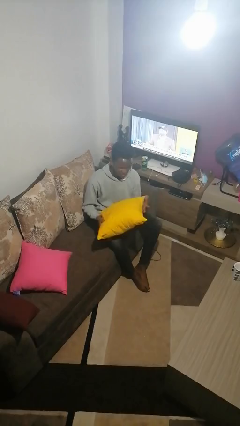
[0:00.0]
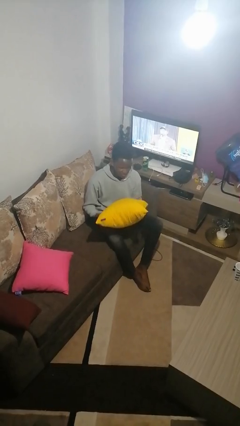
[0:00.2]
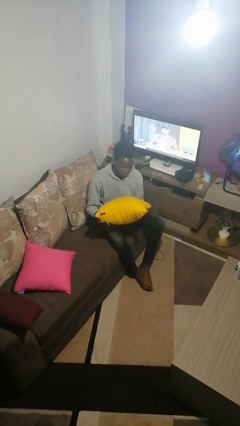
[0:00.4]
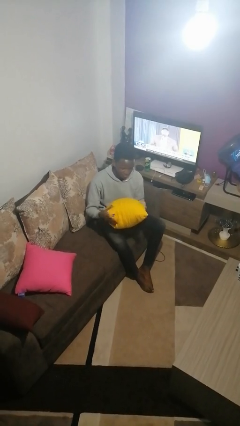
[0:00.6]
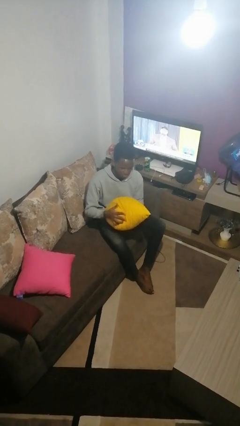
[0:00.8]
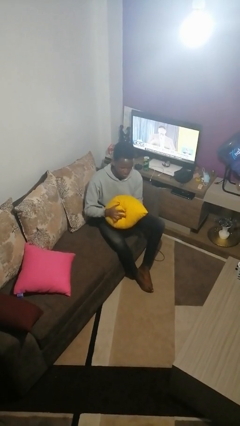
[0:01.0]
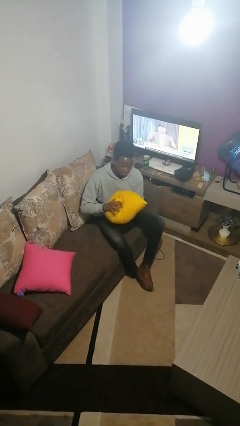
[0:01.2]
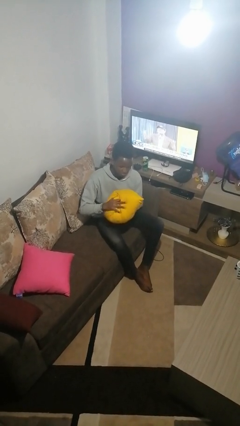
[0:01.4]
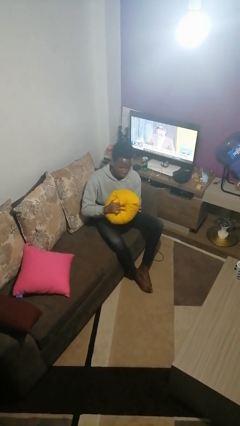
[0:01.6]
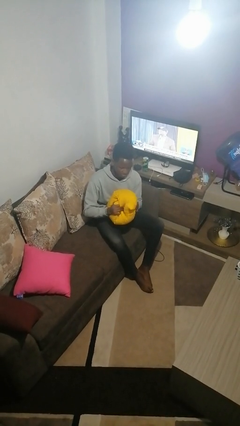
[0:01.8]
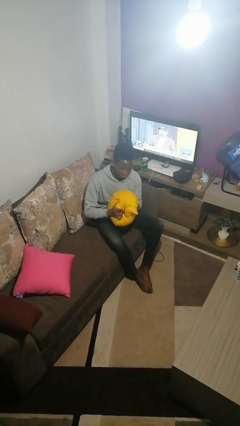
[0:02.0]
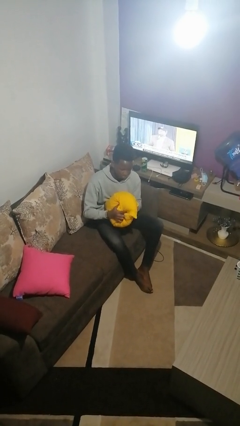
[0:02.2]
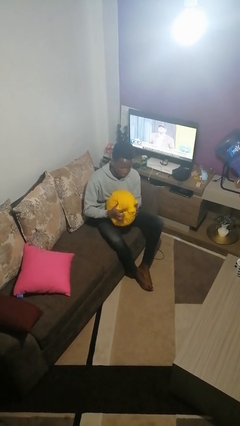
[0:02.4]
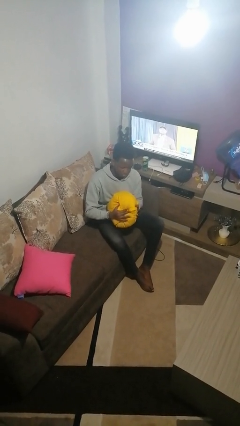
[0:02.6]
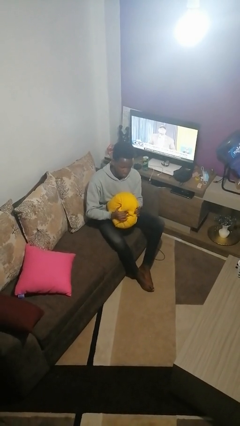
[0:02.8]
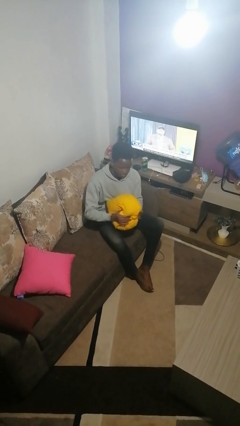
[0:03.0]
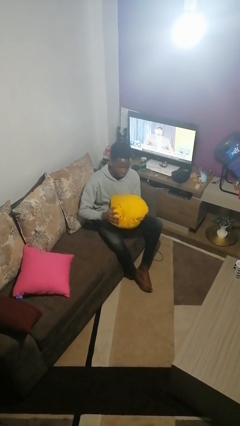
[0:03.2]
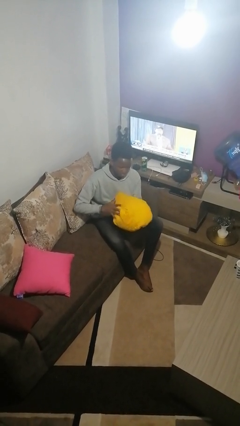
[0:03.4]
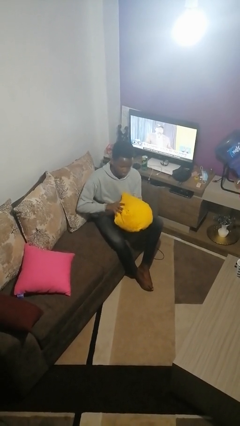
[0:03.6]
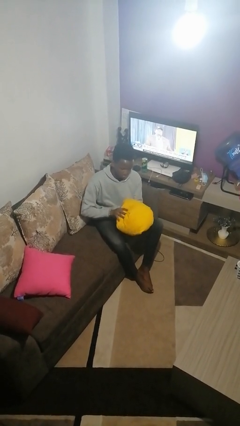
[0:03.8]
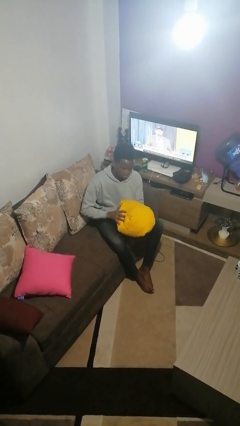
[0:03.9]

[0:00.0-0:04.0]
person squeezes object

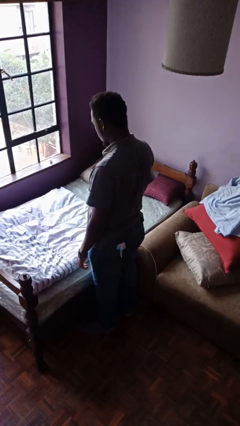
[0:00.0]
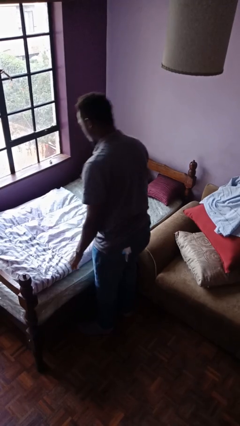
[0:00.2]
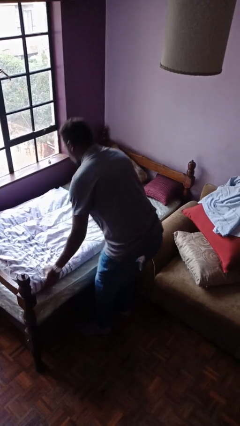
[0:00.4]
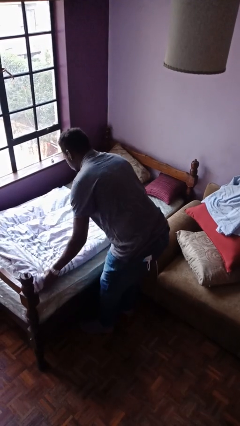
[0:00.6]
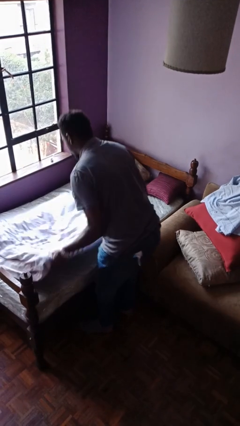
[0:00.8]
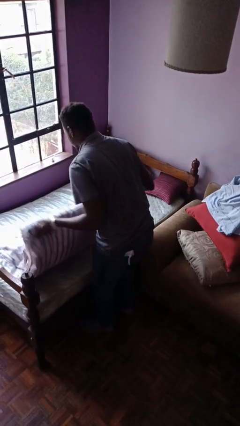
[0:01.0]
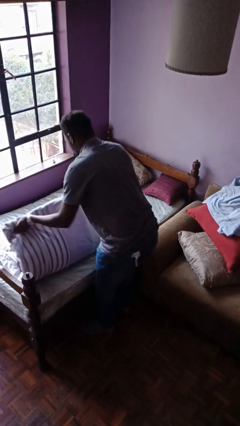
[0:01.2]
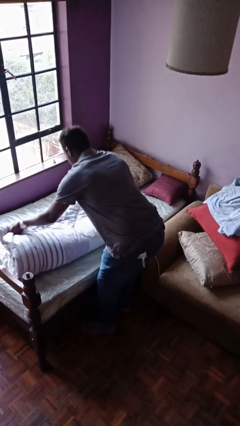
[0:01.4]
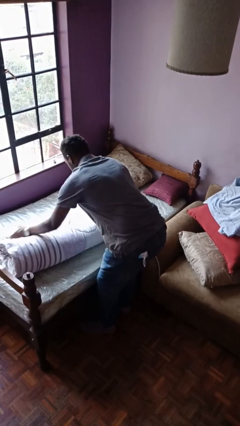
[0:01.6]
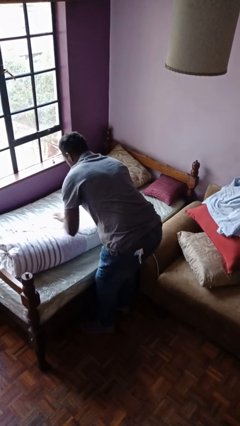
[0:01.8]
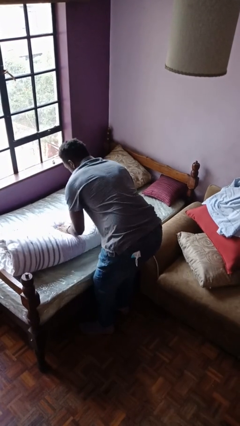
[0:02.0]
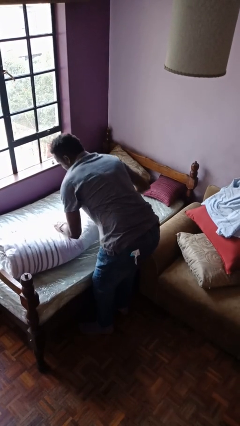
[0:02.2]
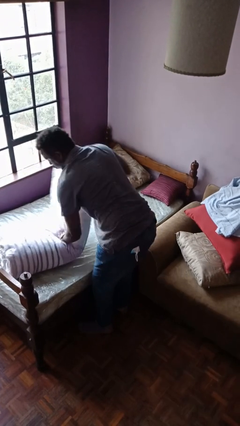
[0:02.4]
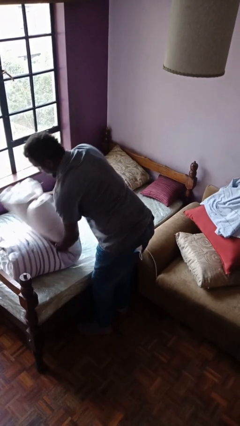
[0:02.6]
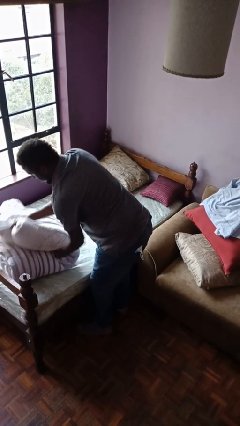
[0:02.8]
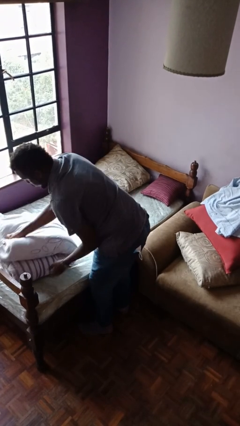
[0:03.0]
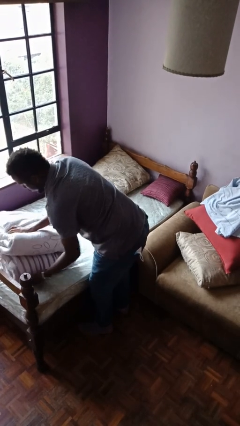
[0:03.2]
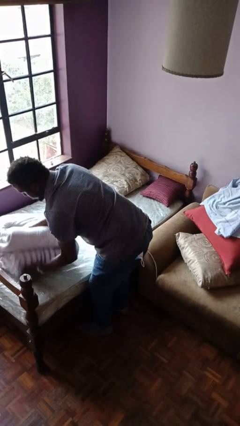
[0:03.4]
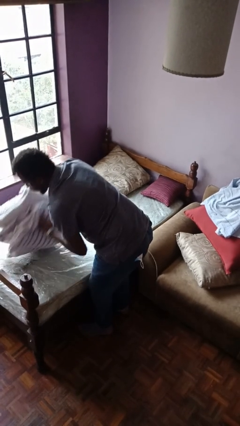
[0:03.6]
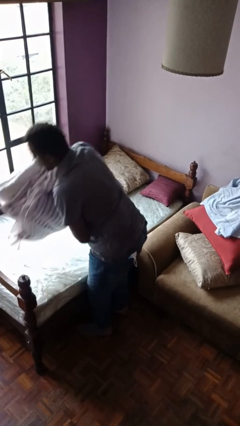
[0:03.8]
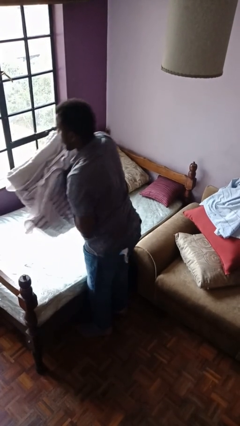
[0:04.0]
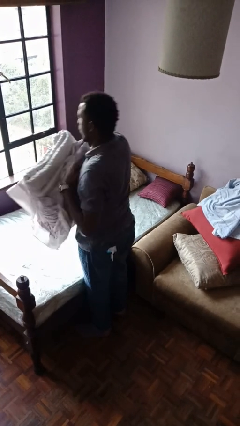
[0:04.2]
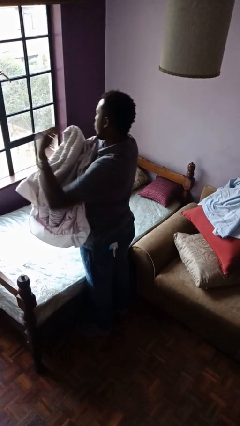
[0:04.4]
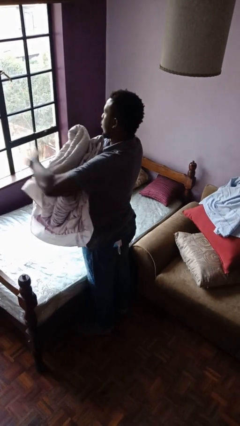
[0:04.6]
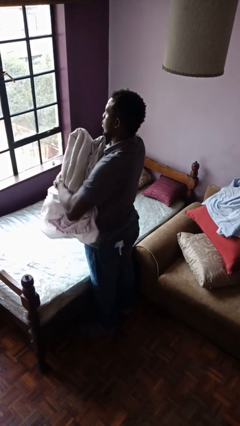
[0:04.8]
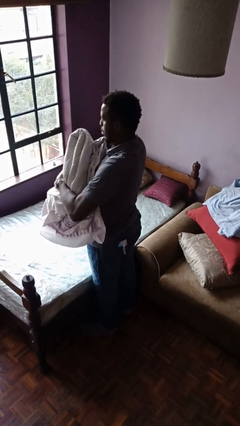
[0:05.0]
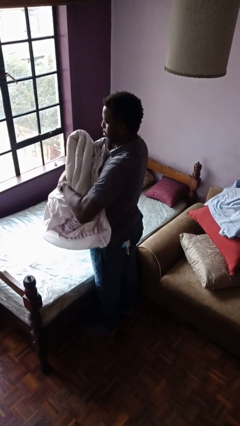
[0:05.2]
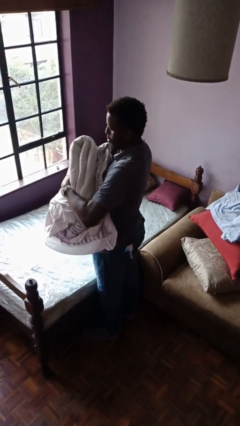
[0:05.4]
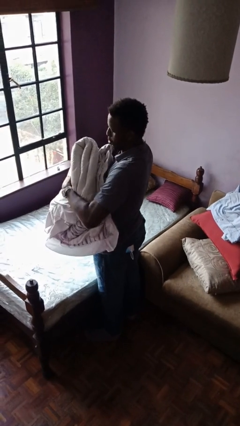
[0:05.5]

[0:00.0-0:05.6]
person folds blanket

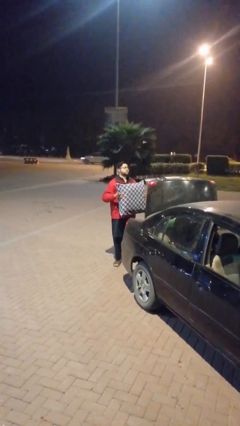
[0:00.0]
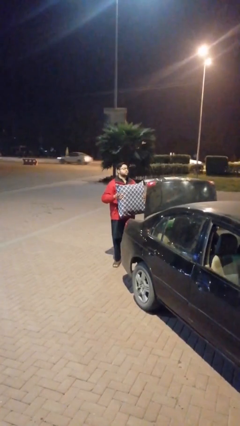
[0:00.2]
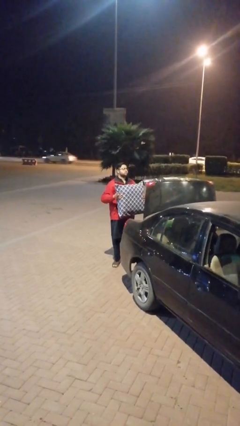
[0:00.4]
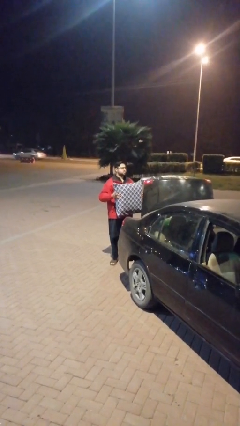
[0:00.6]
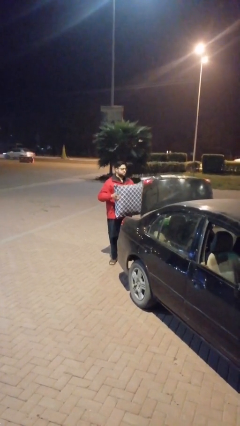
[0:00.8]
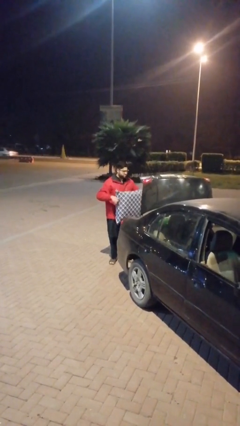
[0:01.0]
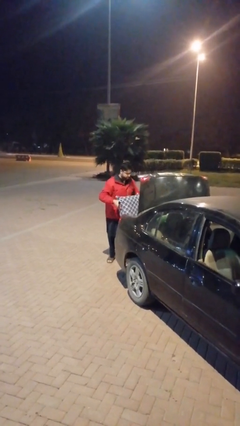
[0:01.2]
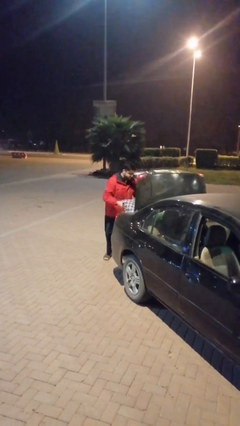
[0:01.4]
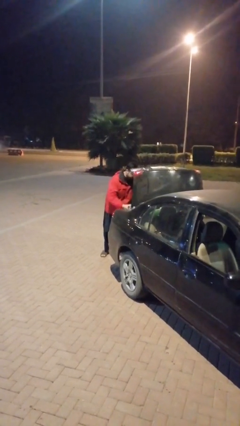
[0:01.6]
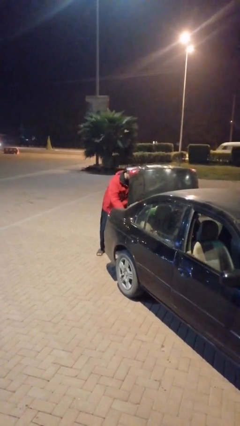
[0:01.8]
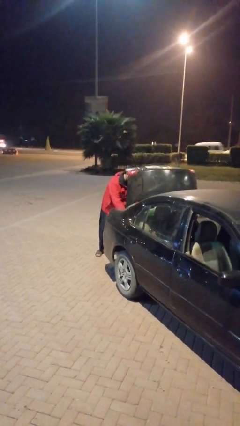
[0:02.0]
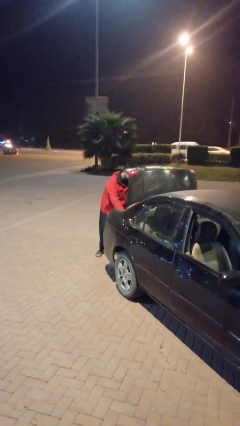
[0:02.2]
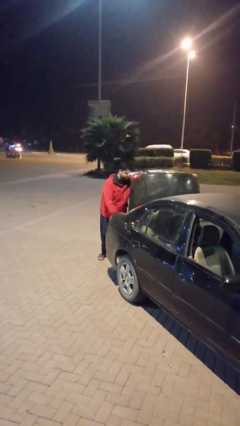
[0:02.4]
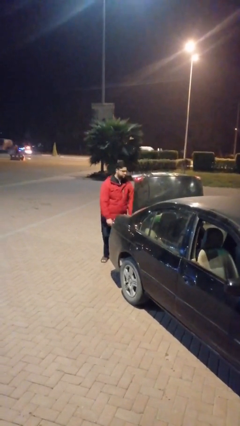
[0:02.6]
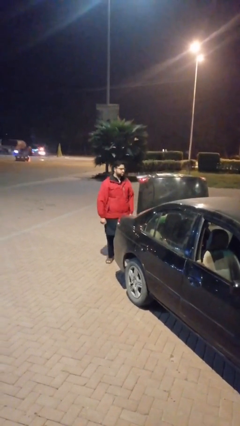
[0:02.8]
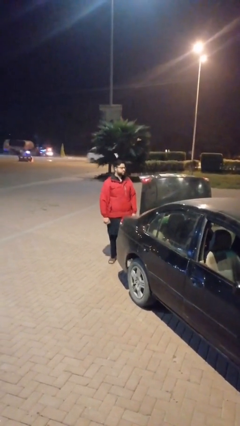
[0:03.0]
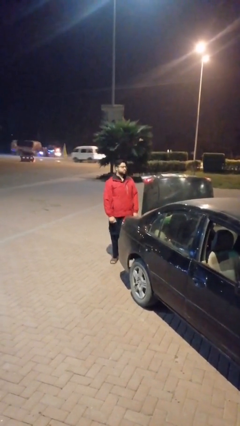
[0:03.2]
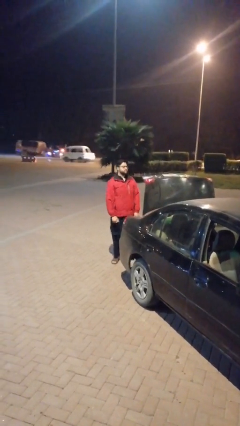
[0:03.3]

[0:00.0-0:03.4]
person loads car

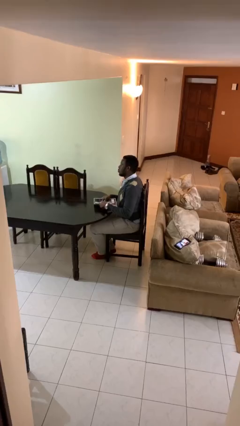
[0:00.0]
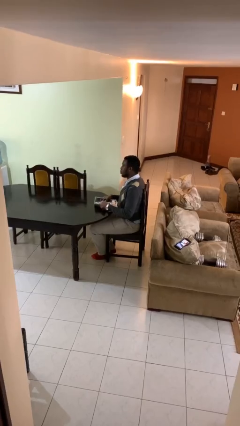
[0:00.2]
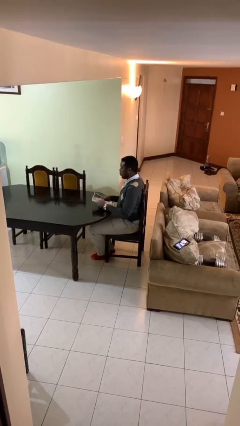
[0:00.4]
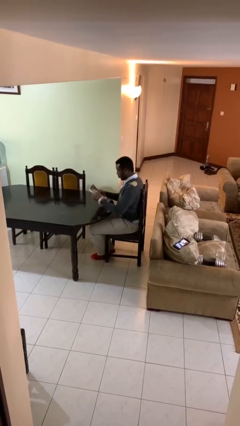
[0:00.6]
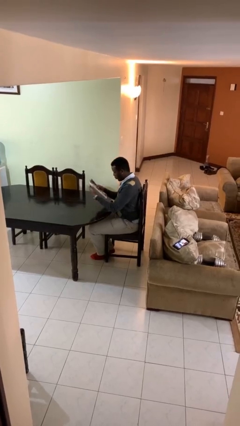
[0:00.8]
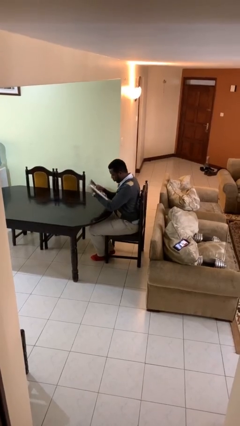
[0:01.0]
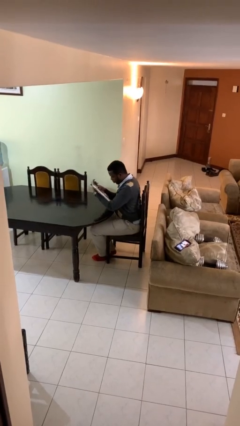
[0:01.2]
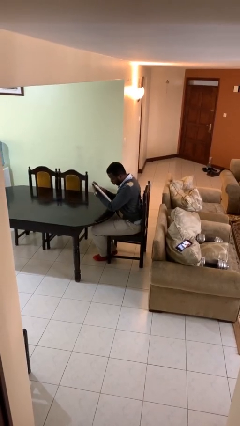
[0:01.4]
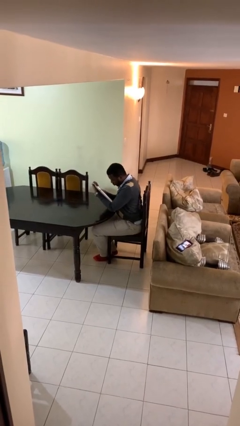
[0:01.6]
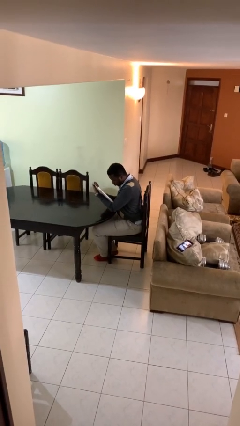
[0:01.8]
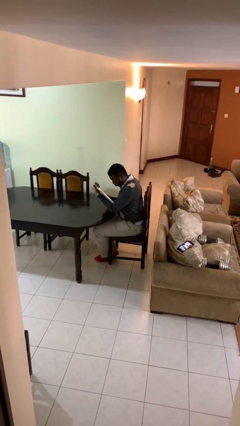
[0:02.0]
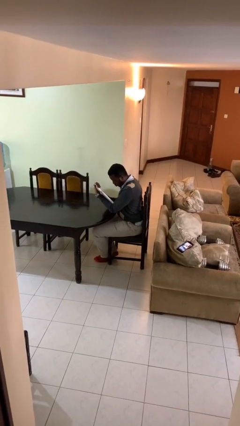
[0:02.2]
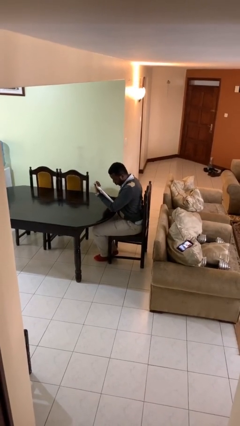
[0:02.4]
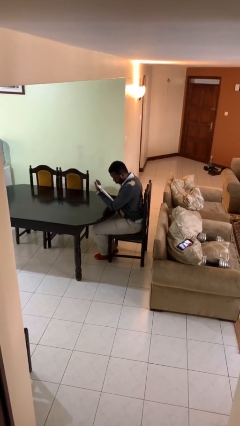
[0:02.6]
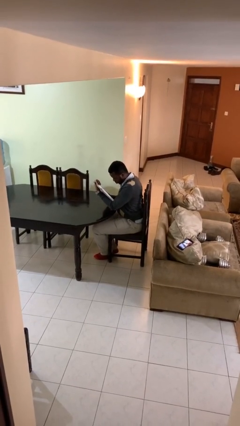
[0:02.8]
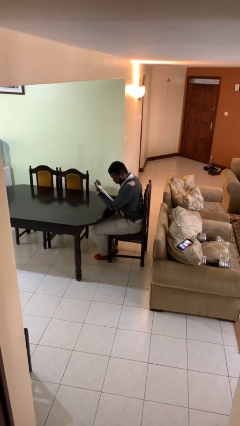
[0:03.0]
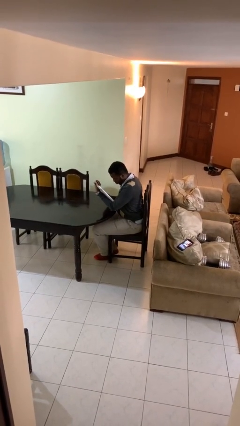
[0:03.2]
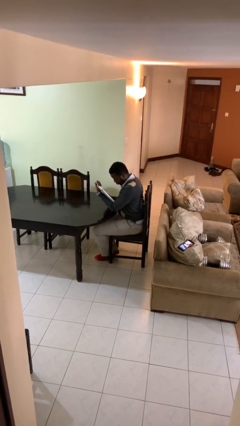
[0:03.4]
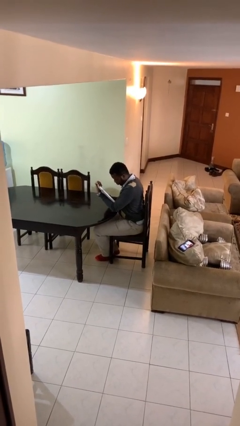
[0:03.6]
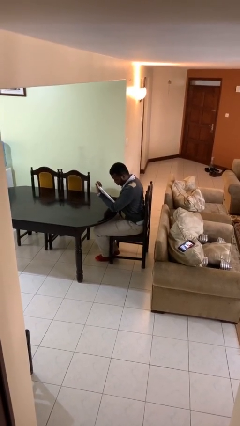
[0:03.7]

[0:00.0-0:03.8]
person reads document

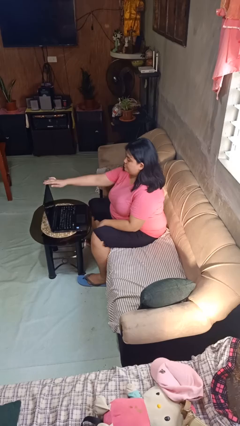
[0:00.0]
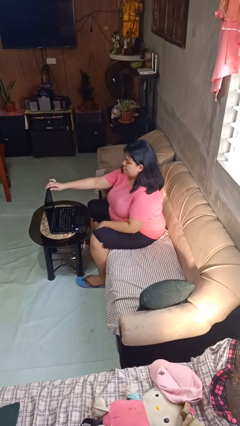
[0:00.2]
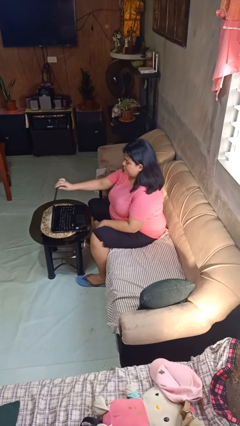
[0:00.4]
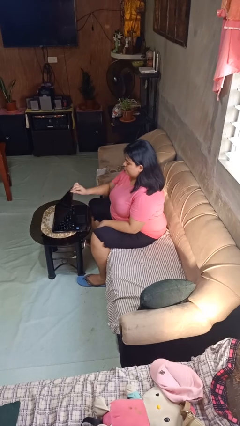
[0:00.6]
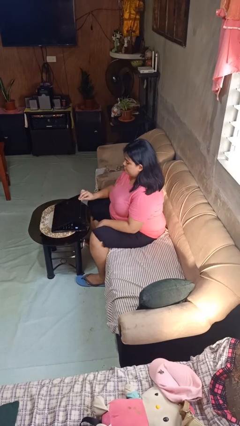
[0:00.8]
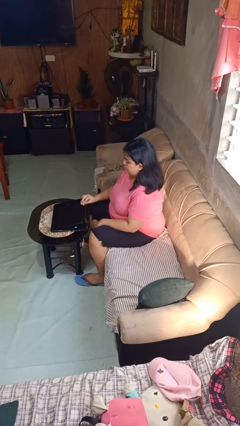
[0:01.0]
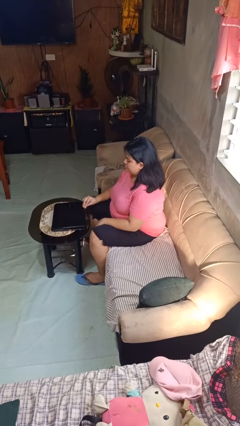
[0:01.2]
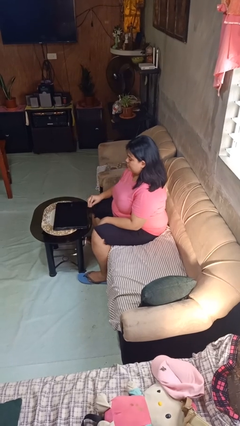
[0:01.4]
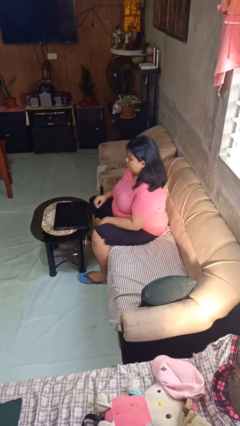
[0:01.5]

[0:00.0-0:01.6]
person closes laptop
